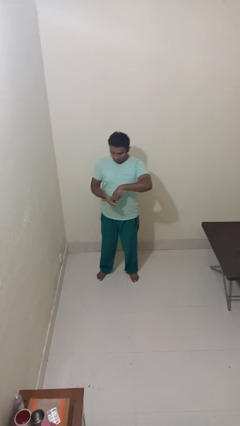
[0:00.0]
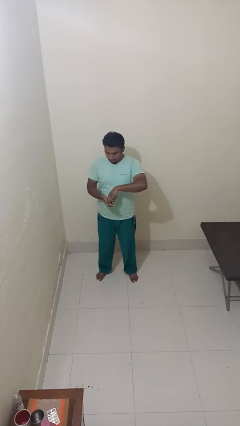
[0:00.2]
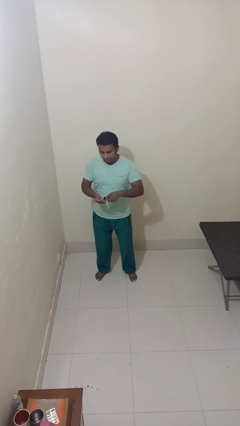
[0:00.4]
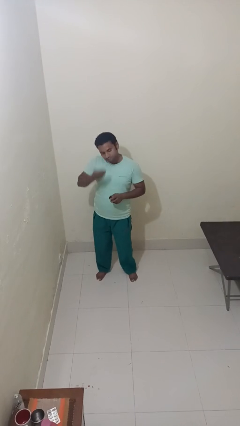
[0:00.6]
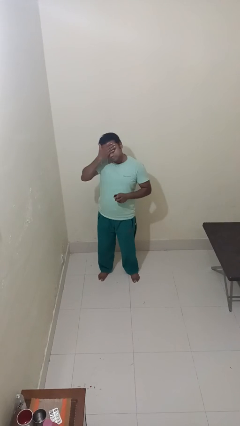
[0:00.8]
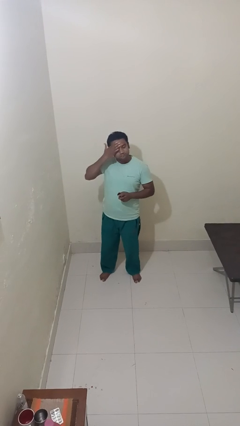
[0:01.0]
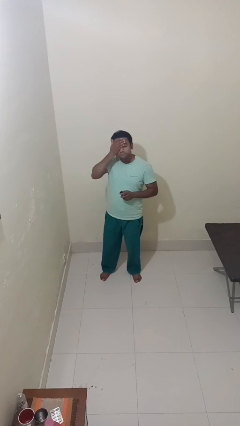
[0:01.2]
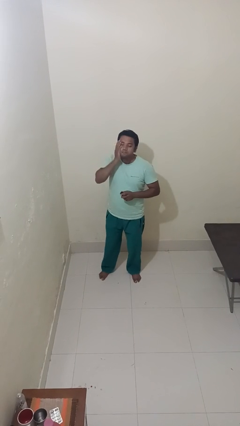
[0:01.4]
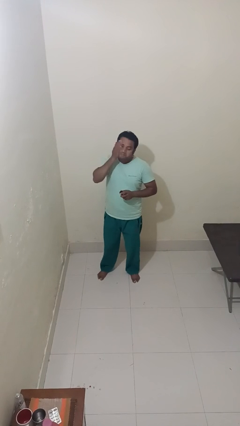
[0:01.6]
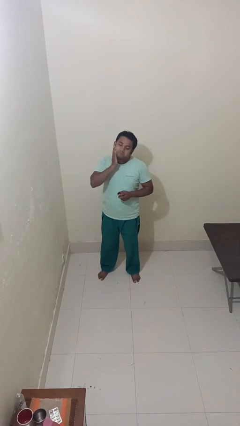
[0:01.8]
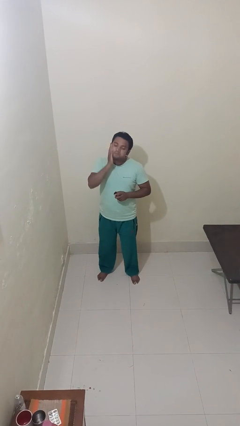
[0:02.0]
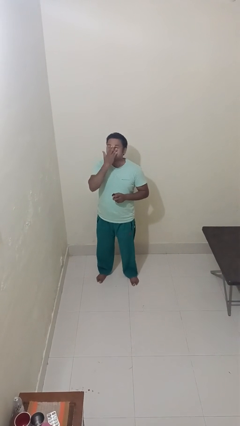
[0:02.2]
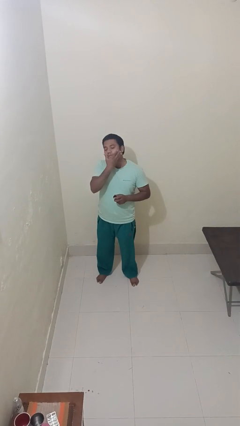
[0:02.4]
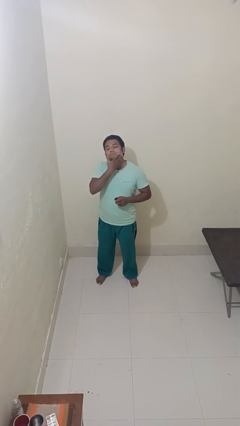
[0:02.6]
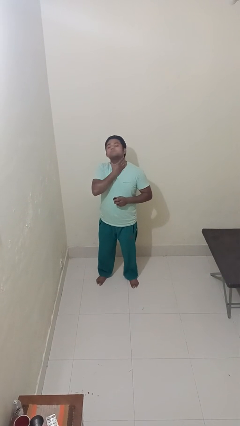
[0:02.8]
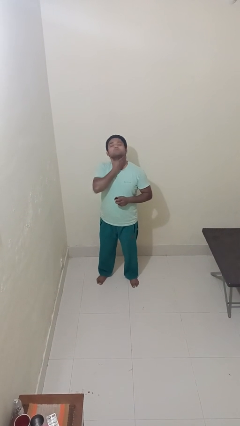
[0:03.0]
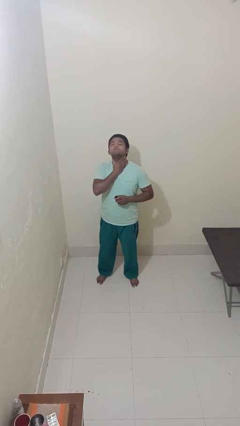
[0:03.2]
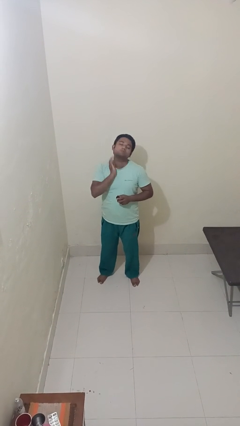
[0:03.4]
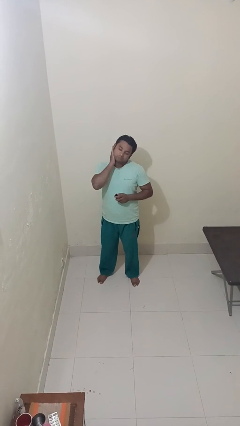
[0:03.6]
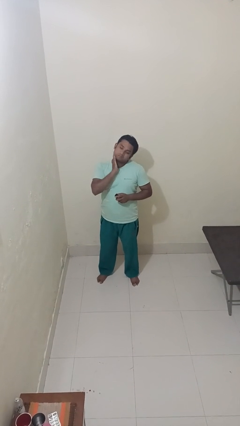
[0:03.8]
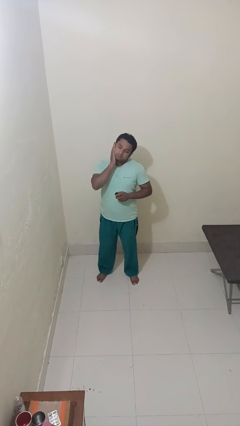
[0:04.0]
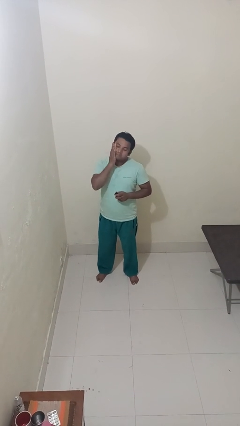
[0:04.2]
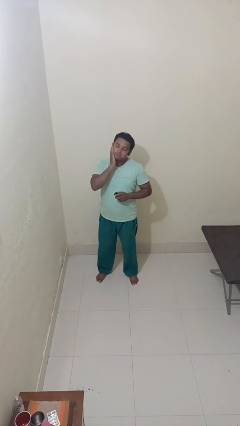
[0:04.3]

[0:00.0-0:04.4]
person applies facial moisturizer

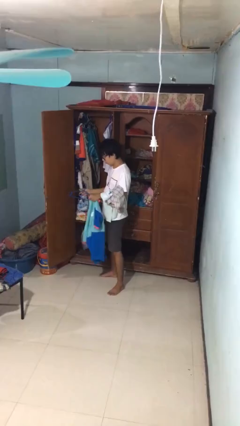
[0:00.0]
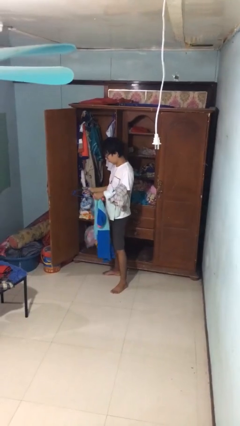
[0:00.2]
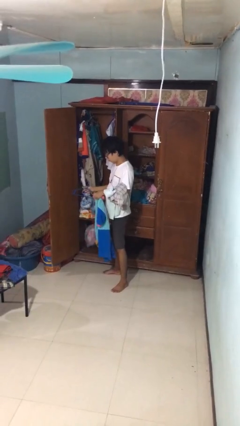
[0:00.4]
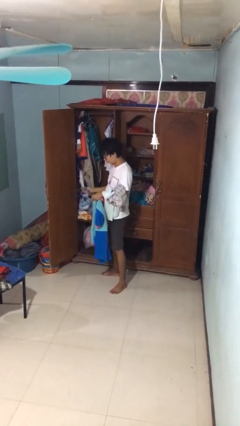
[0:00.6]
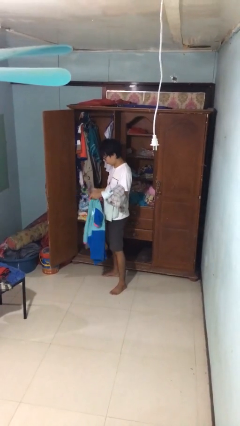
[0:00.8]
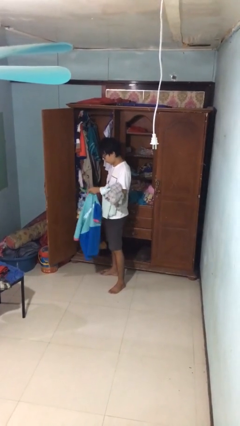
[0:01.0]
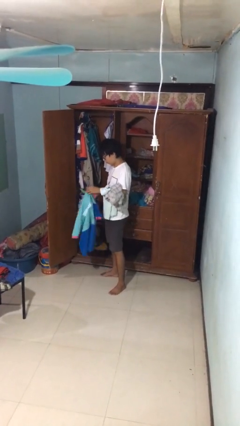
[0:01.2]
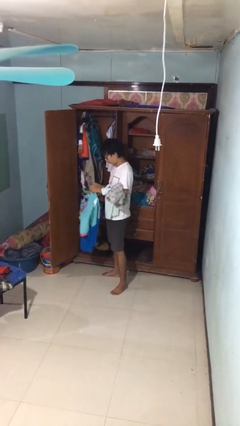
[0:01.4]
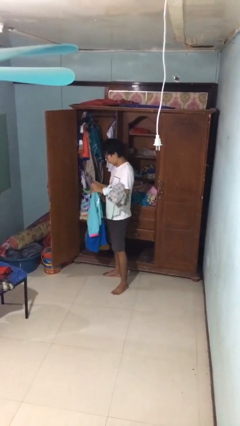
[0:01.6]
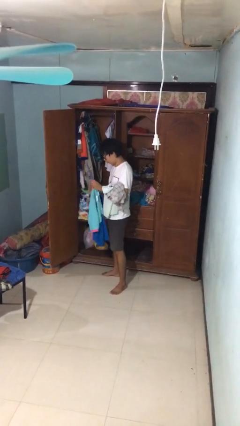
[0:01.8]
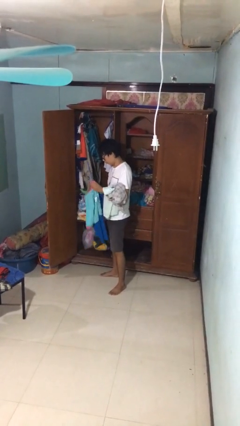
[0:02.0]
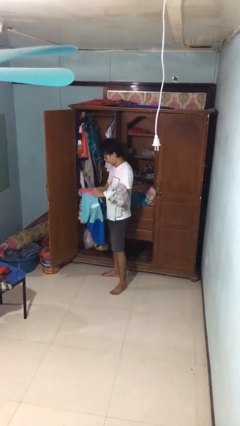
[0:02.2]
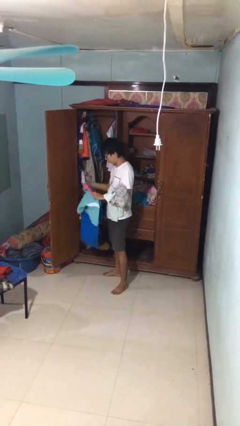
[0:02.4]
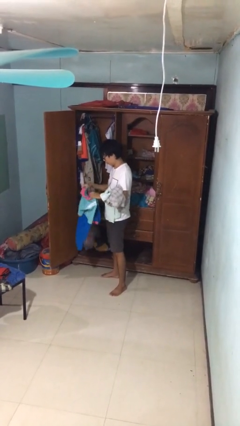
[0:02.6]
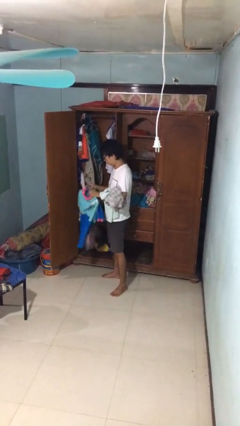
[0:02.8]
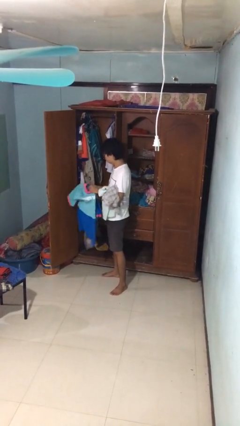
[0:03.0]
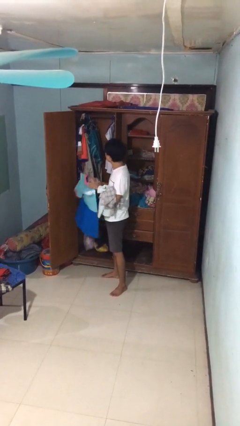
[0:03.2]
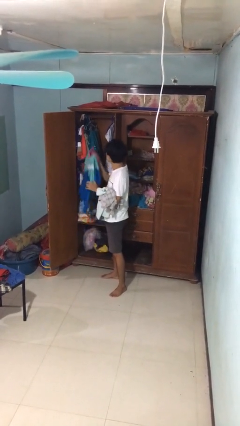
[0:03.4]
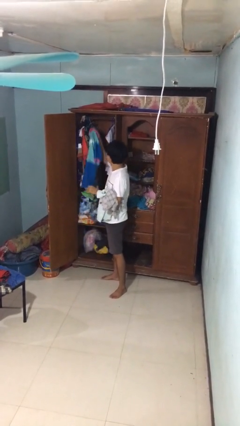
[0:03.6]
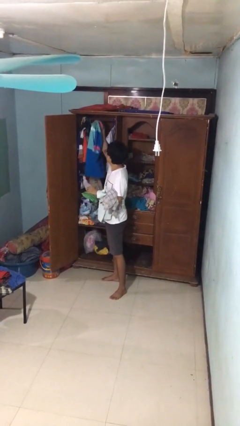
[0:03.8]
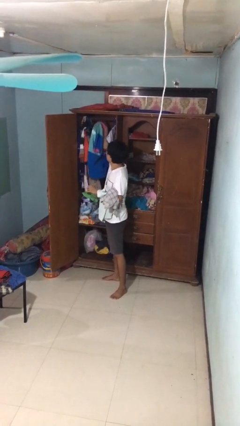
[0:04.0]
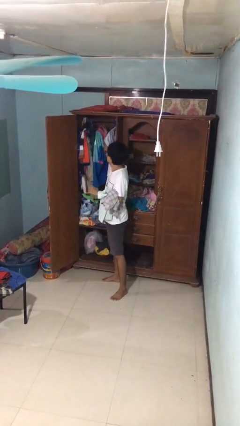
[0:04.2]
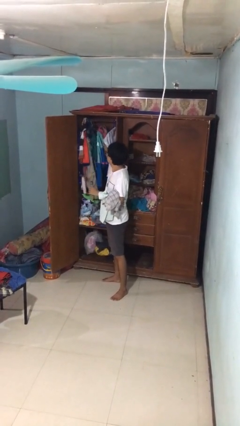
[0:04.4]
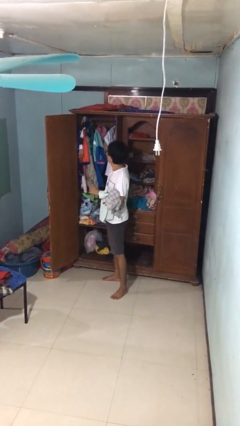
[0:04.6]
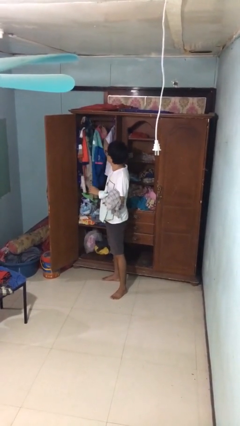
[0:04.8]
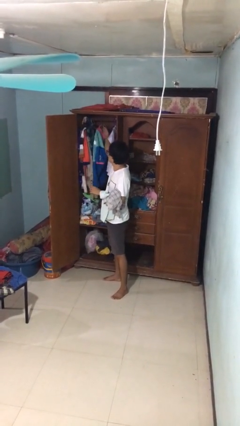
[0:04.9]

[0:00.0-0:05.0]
person puts clothes into closet

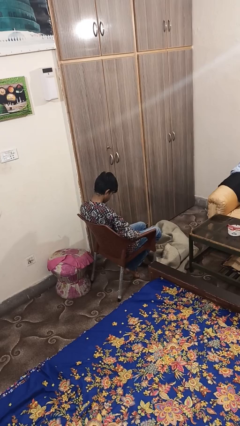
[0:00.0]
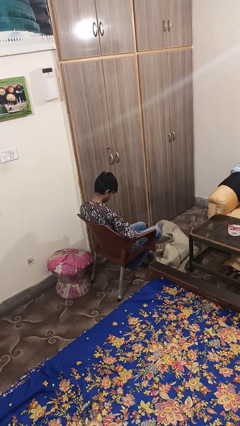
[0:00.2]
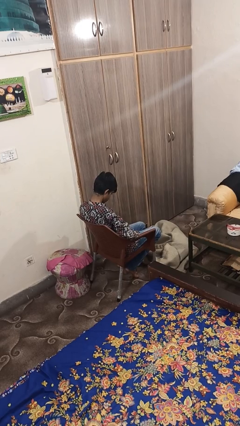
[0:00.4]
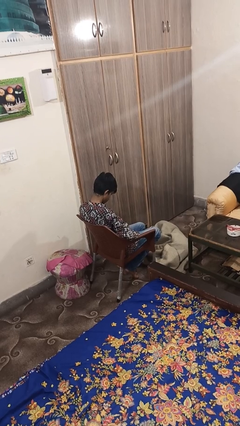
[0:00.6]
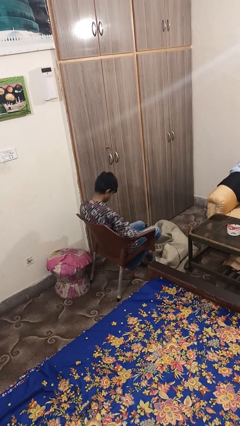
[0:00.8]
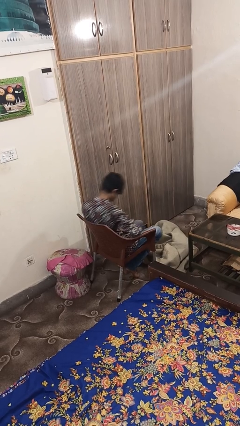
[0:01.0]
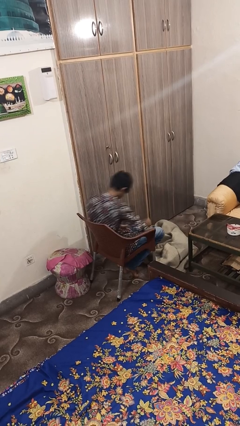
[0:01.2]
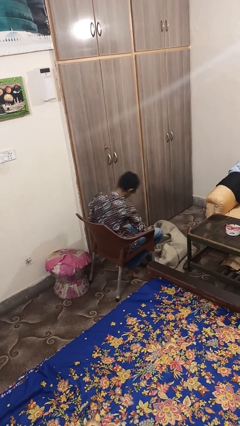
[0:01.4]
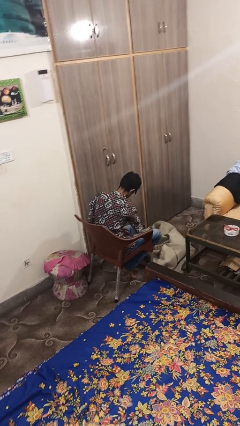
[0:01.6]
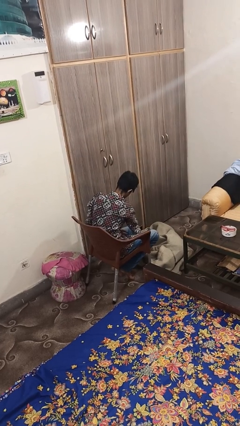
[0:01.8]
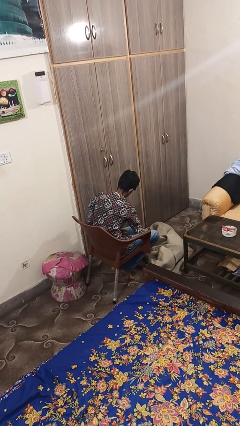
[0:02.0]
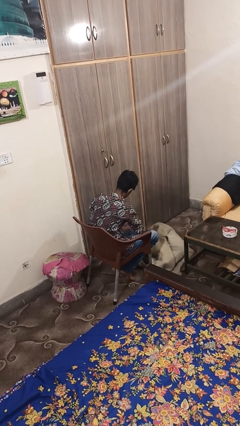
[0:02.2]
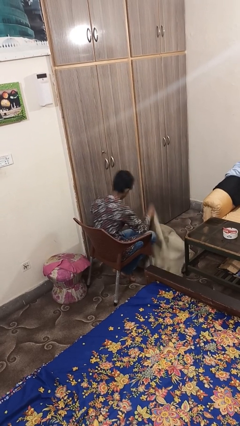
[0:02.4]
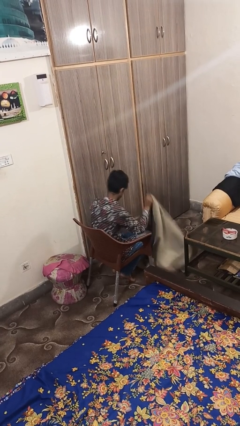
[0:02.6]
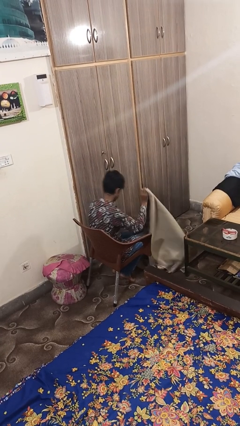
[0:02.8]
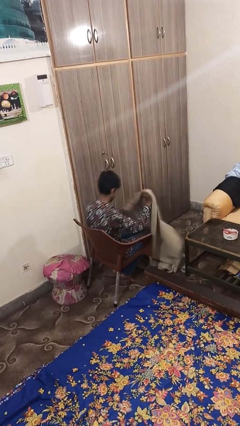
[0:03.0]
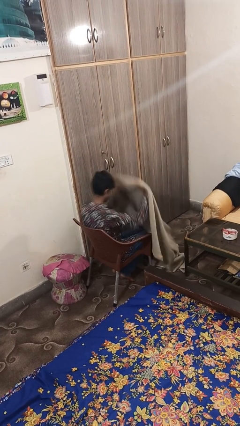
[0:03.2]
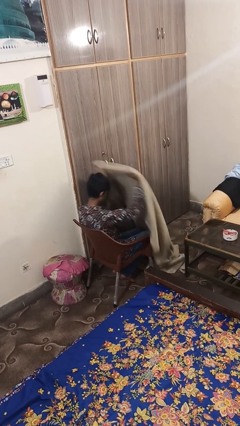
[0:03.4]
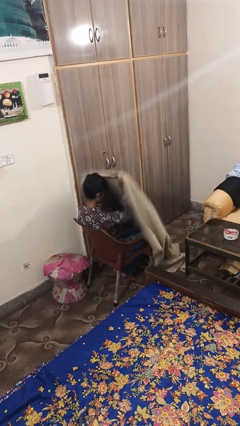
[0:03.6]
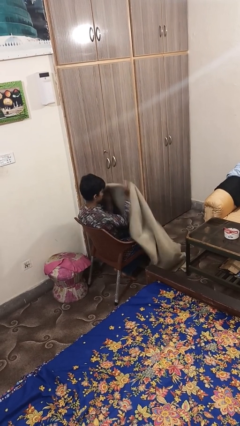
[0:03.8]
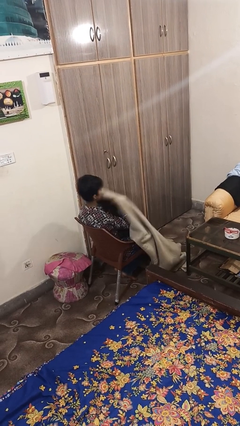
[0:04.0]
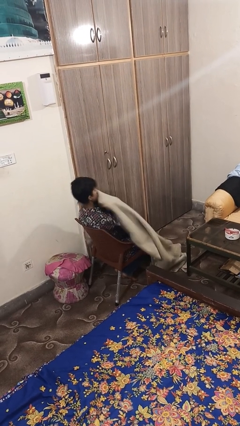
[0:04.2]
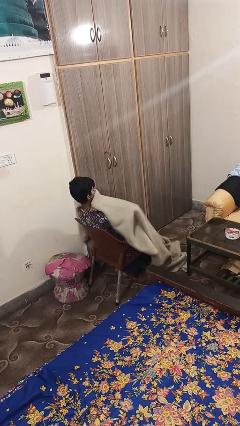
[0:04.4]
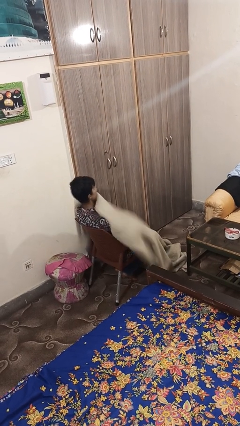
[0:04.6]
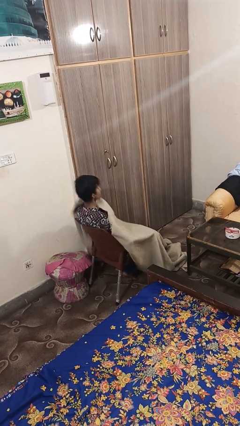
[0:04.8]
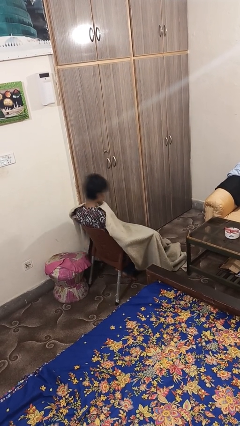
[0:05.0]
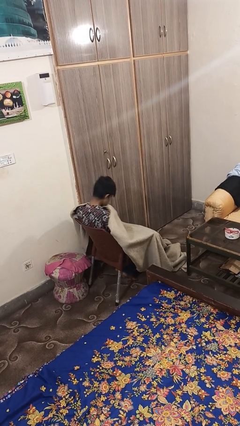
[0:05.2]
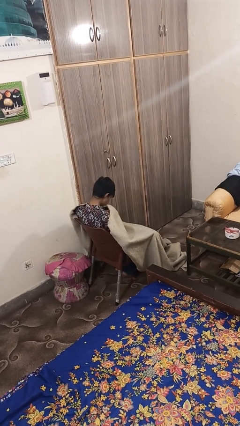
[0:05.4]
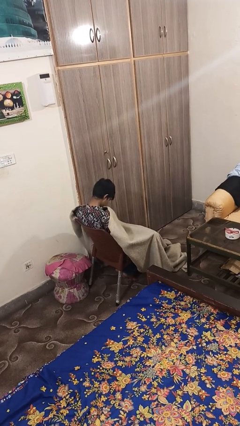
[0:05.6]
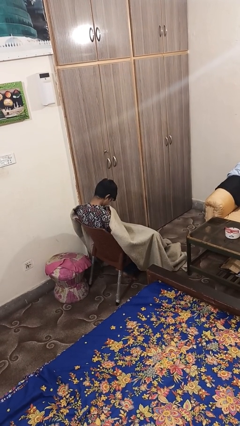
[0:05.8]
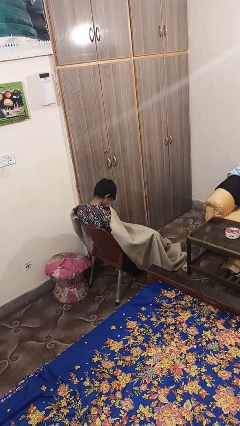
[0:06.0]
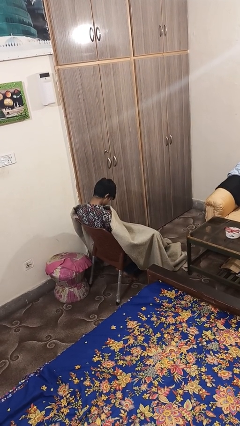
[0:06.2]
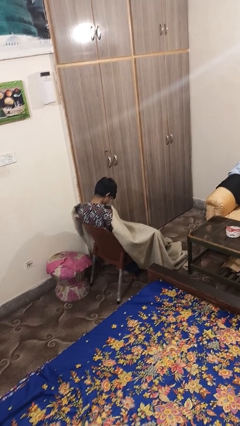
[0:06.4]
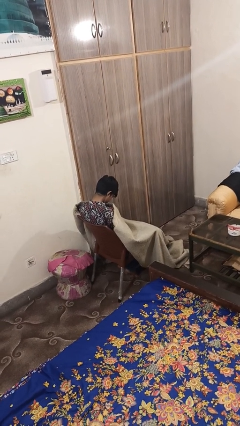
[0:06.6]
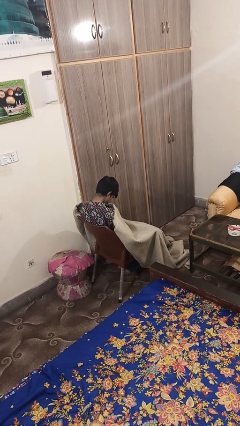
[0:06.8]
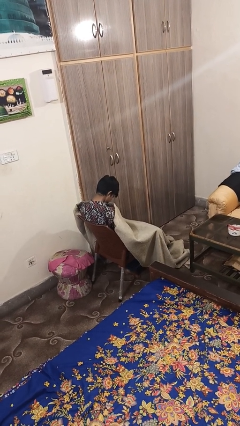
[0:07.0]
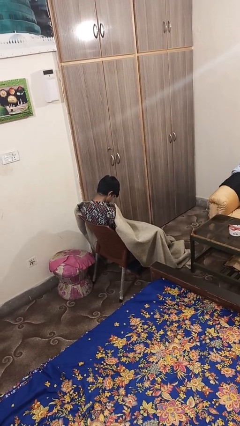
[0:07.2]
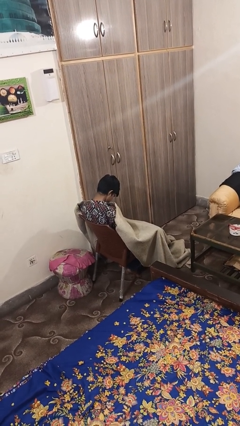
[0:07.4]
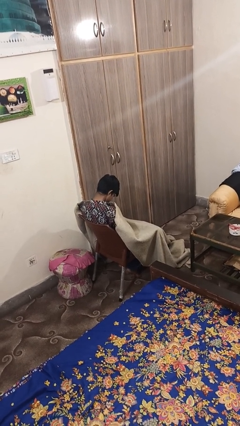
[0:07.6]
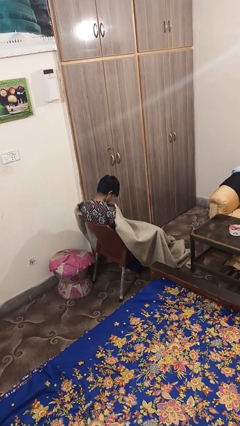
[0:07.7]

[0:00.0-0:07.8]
person covers with blanket

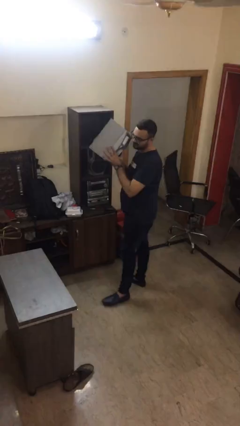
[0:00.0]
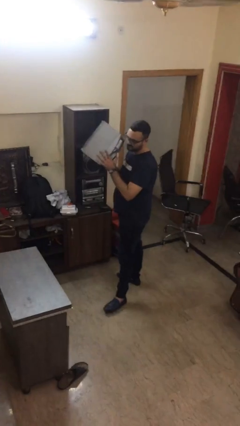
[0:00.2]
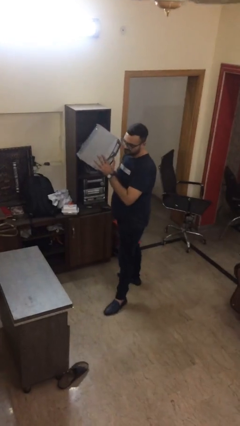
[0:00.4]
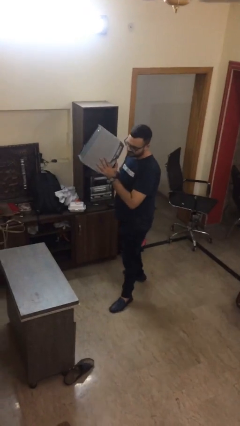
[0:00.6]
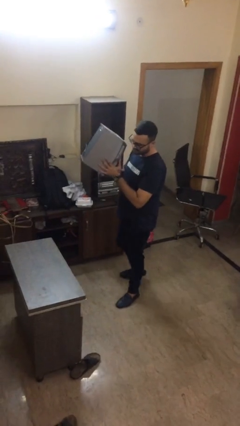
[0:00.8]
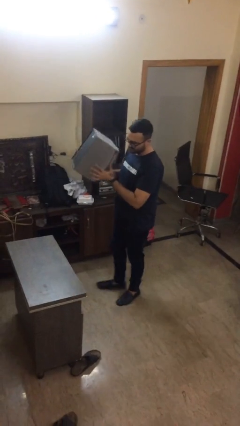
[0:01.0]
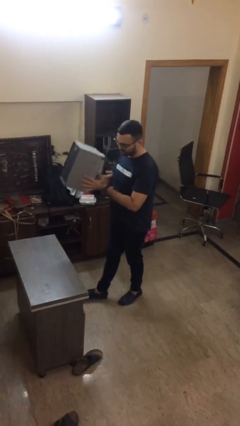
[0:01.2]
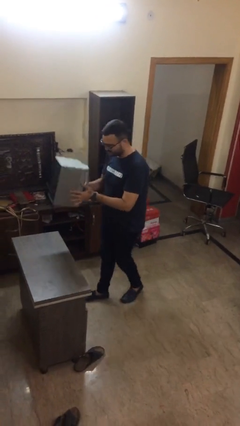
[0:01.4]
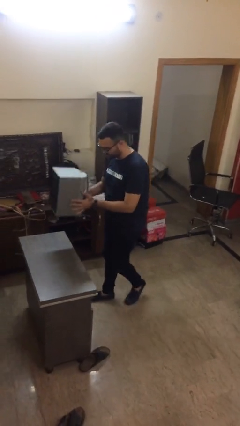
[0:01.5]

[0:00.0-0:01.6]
person puts down object on table
